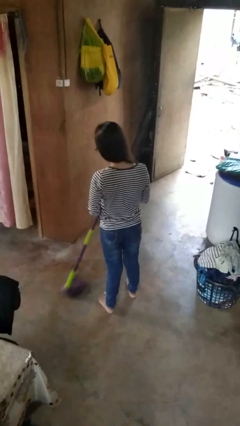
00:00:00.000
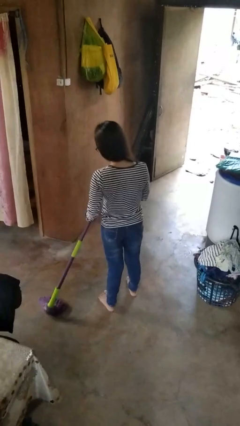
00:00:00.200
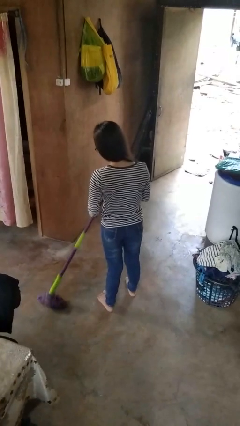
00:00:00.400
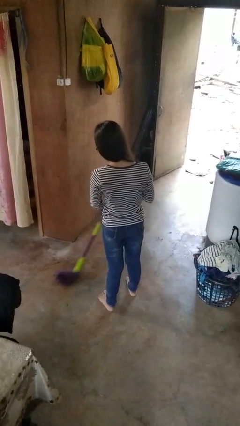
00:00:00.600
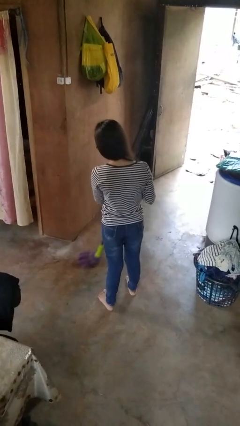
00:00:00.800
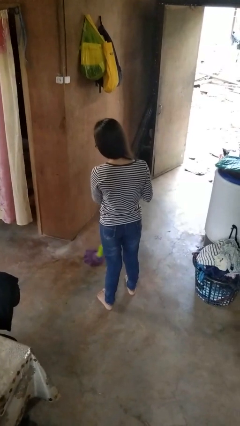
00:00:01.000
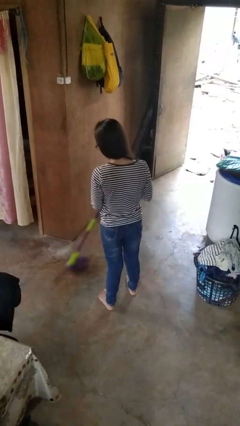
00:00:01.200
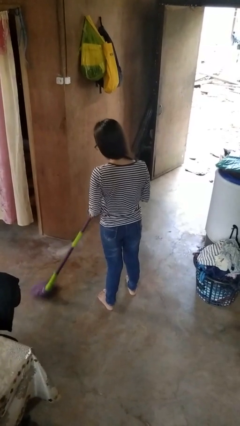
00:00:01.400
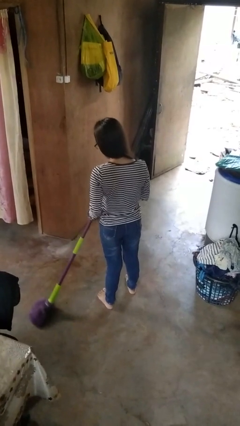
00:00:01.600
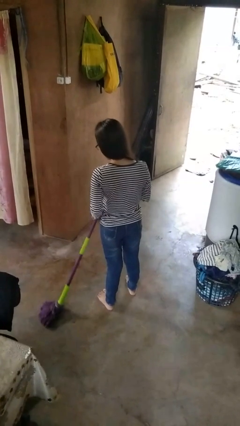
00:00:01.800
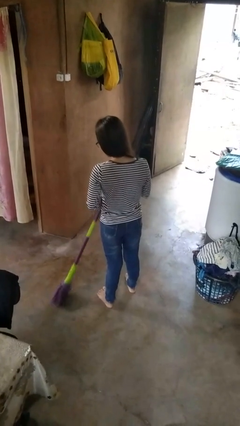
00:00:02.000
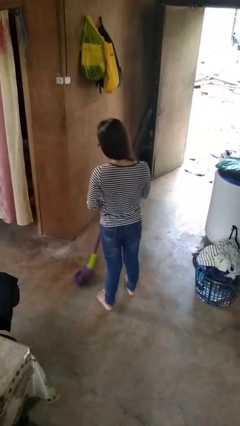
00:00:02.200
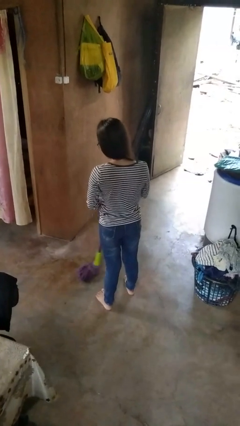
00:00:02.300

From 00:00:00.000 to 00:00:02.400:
person mops

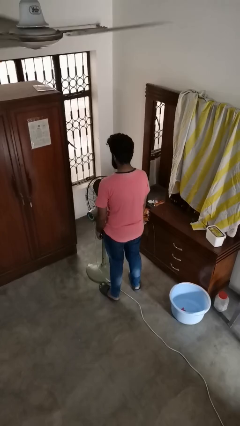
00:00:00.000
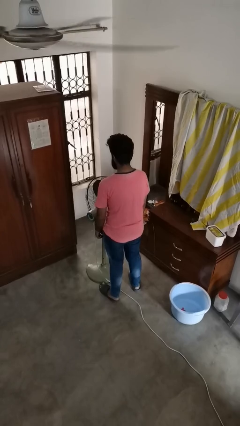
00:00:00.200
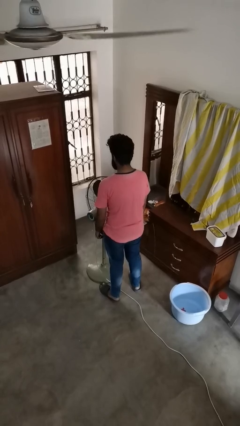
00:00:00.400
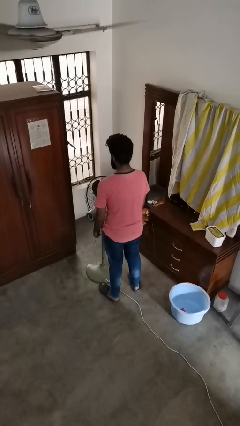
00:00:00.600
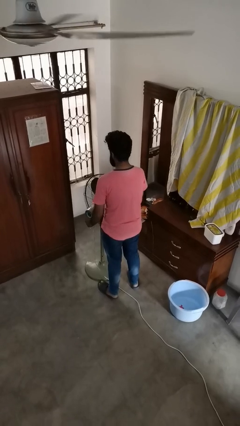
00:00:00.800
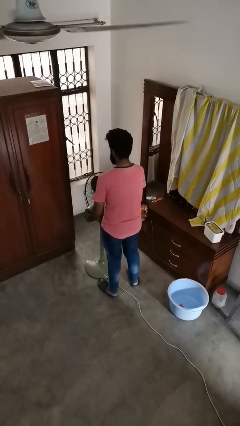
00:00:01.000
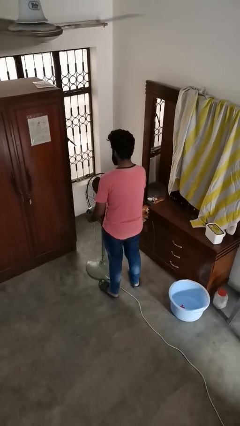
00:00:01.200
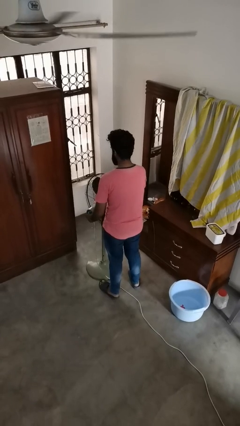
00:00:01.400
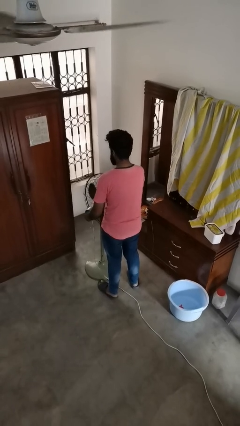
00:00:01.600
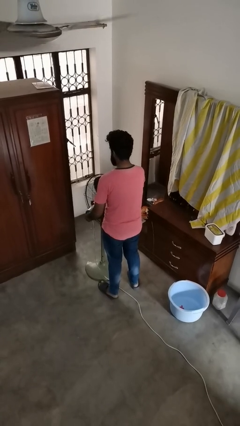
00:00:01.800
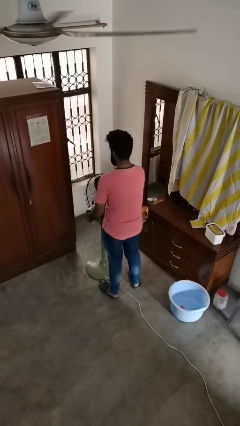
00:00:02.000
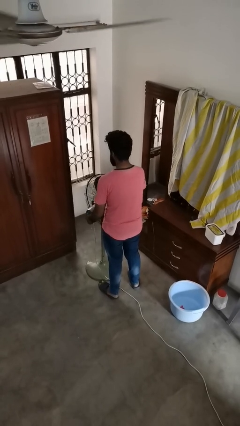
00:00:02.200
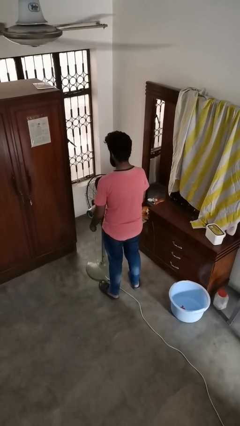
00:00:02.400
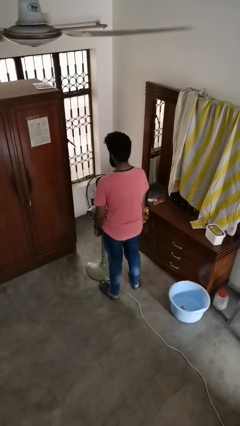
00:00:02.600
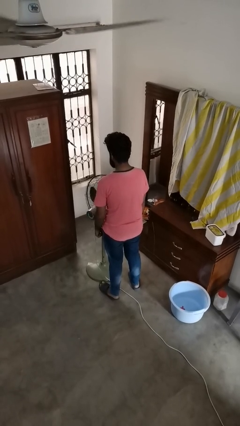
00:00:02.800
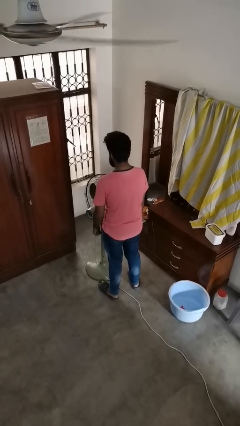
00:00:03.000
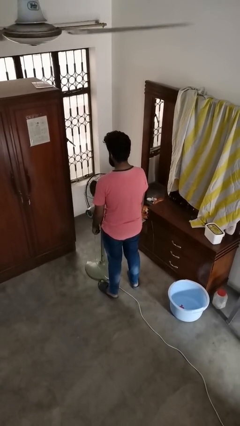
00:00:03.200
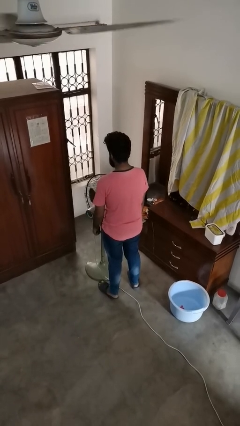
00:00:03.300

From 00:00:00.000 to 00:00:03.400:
person turns on fan

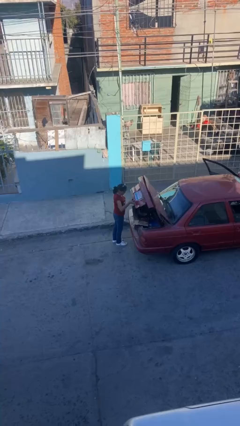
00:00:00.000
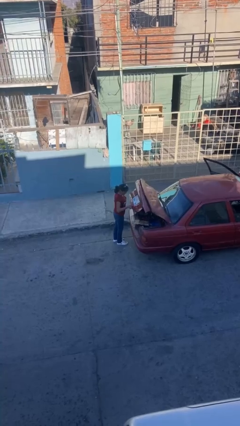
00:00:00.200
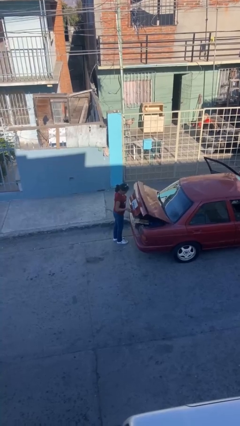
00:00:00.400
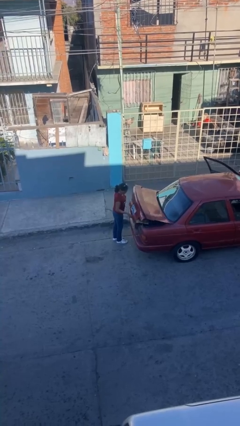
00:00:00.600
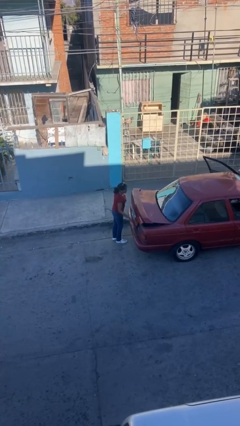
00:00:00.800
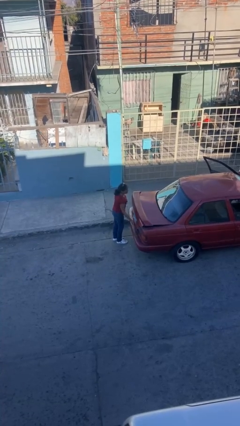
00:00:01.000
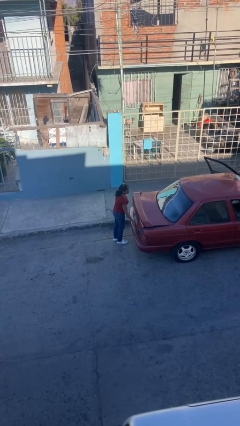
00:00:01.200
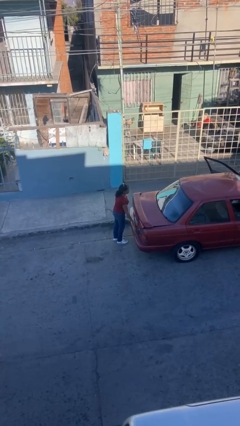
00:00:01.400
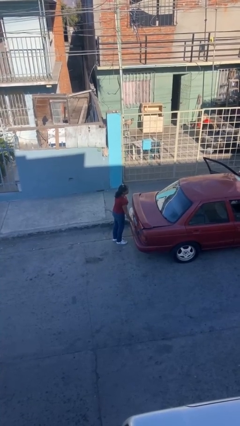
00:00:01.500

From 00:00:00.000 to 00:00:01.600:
person closes car trunk

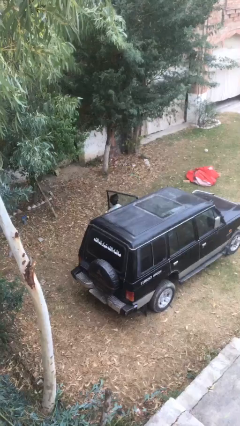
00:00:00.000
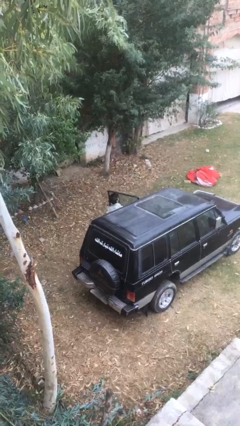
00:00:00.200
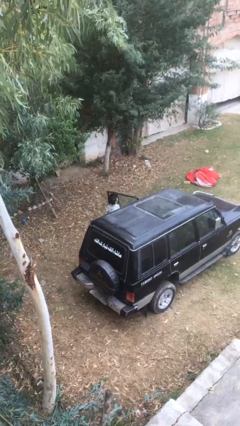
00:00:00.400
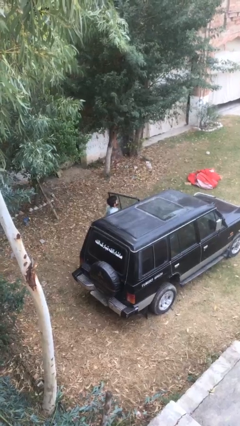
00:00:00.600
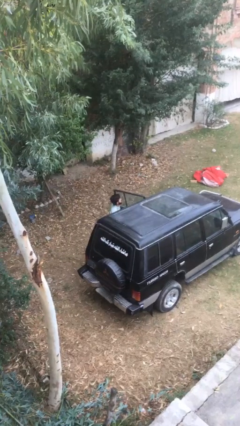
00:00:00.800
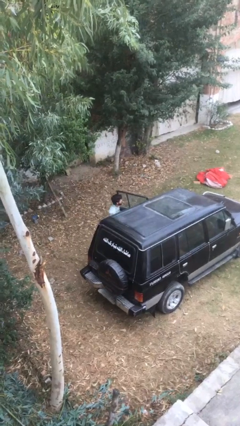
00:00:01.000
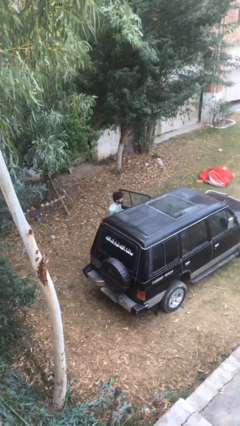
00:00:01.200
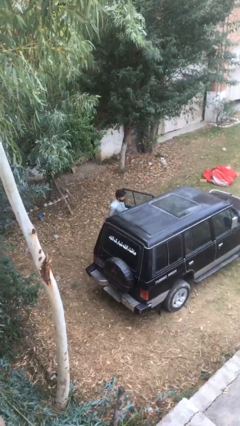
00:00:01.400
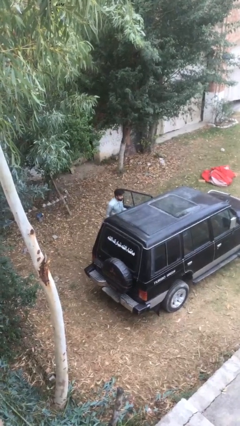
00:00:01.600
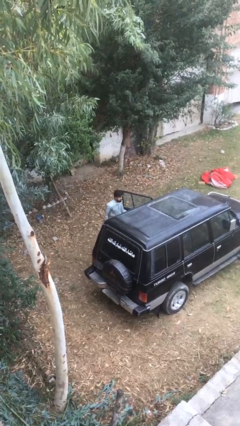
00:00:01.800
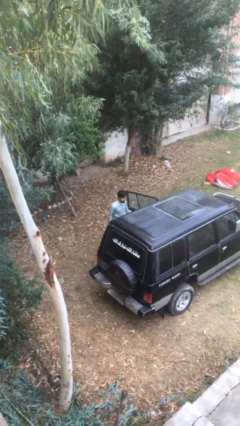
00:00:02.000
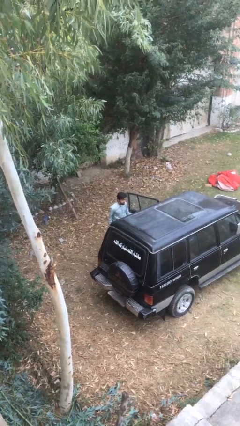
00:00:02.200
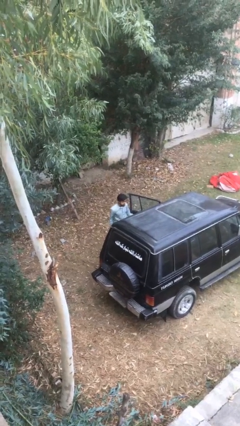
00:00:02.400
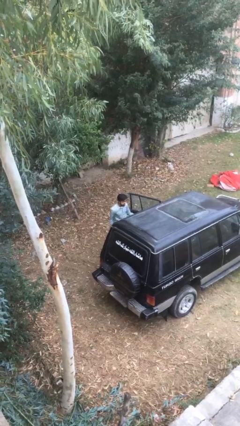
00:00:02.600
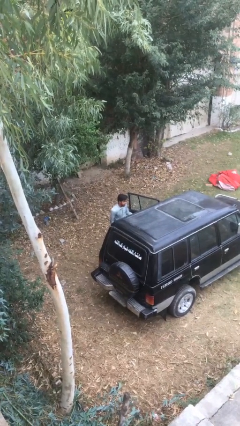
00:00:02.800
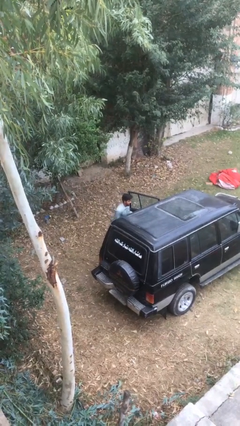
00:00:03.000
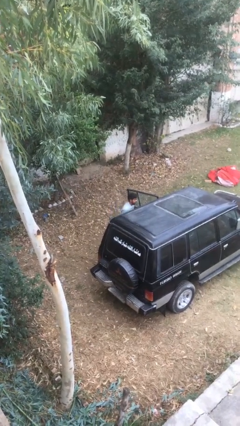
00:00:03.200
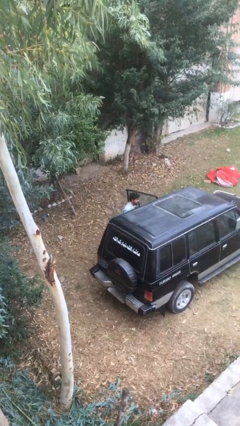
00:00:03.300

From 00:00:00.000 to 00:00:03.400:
person exits car

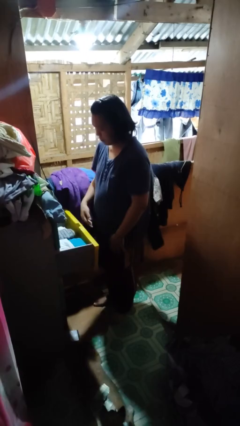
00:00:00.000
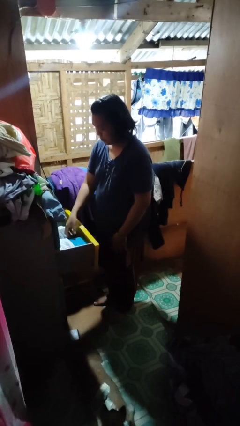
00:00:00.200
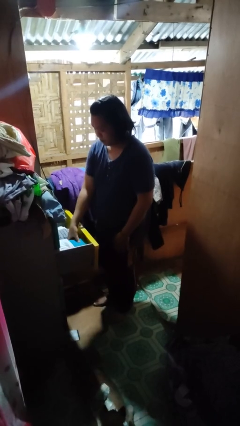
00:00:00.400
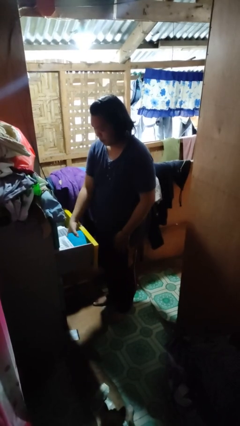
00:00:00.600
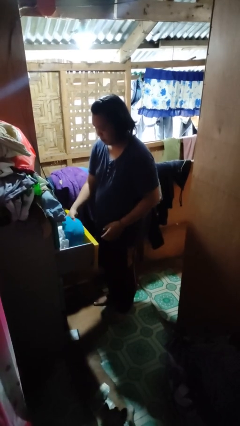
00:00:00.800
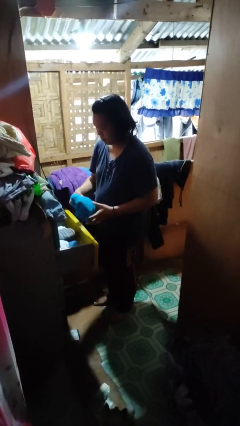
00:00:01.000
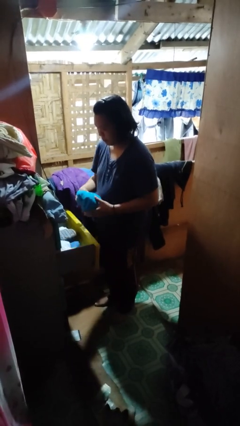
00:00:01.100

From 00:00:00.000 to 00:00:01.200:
person takes clothes from dresser

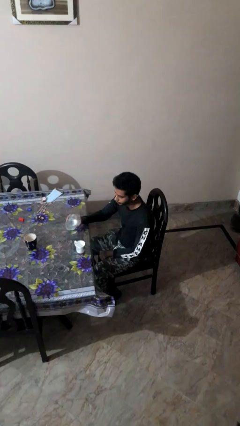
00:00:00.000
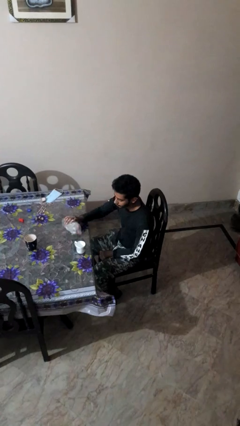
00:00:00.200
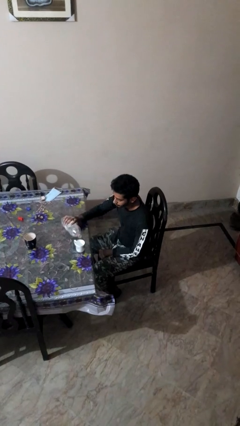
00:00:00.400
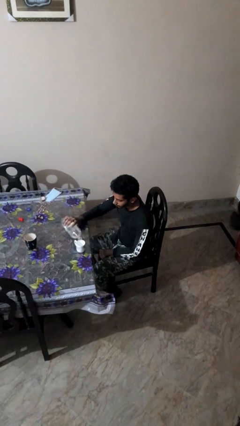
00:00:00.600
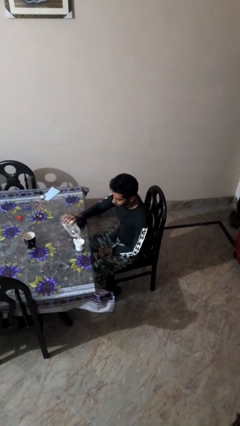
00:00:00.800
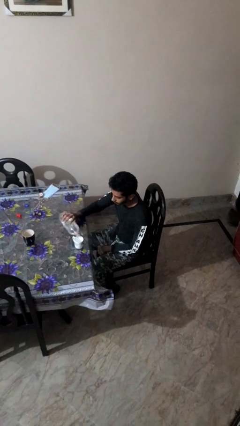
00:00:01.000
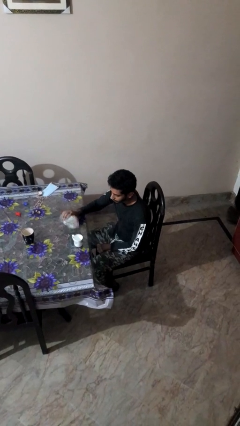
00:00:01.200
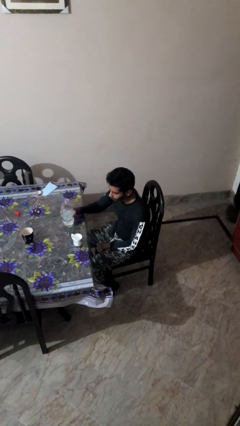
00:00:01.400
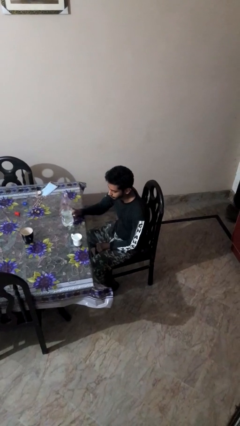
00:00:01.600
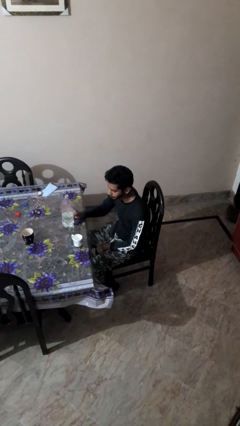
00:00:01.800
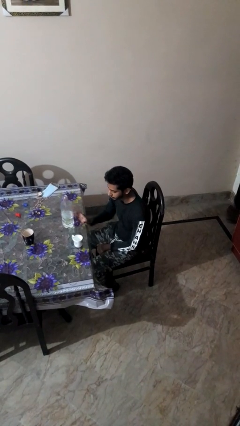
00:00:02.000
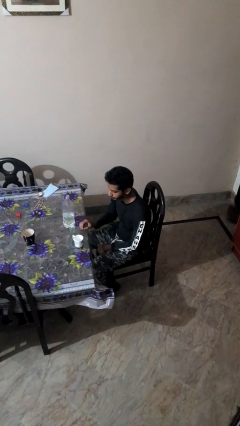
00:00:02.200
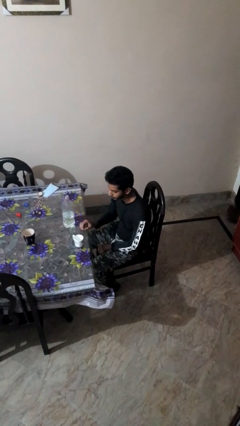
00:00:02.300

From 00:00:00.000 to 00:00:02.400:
person pours liquid into cup

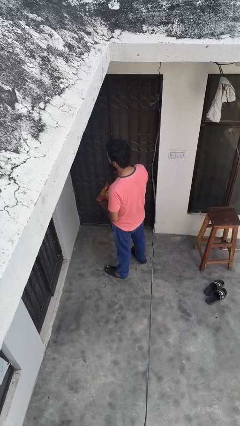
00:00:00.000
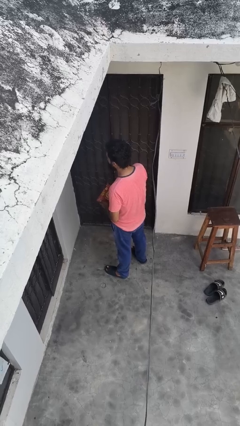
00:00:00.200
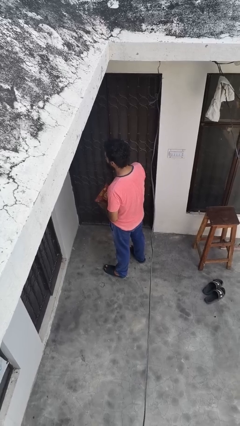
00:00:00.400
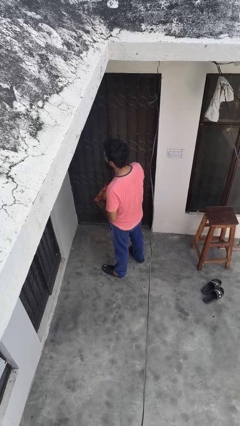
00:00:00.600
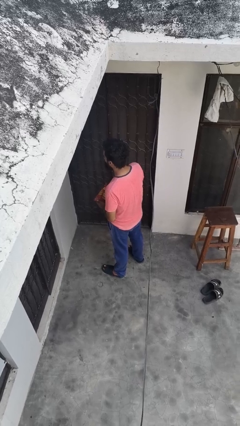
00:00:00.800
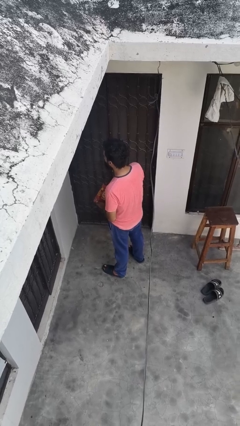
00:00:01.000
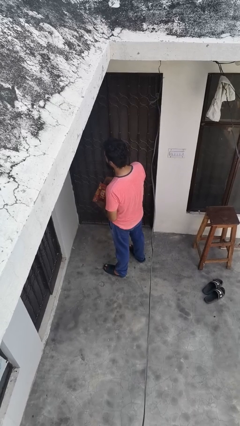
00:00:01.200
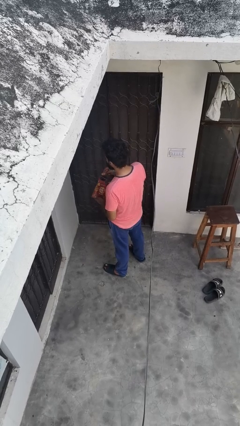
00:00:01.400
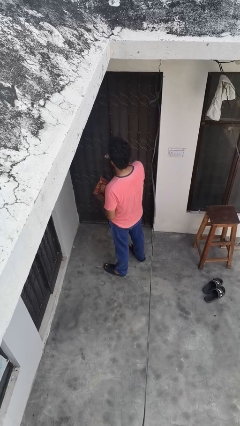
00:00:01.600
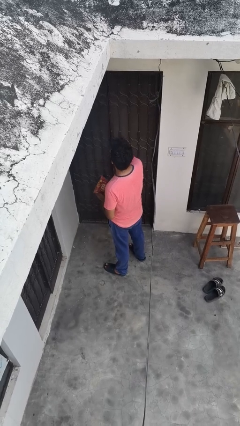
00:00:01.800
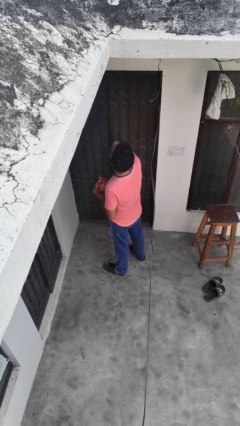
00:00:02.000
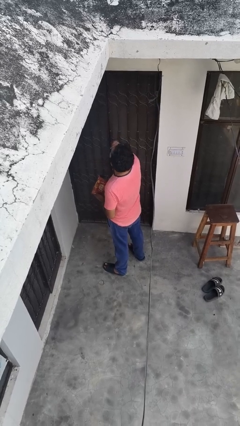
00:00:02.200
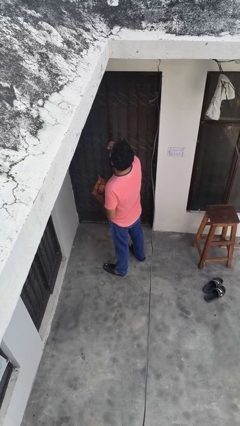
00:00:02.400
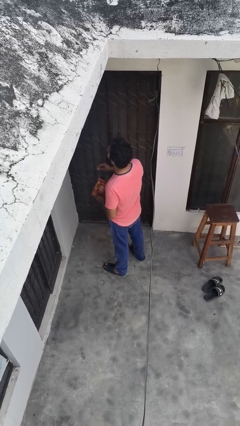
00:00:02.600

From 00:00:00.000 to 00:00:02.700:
person eats snack from bag
